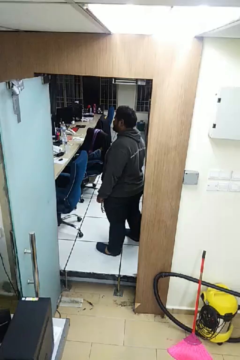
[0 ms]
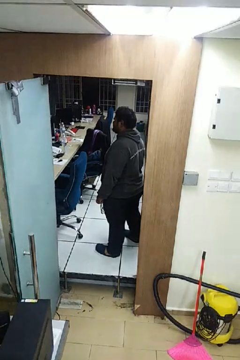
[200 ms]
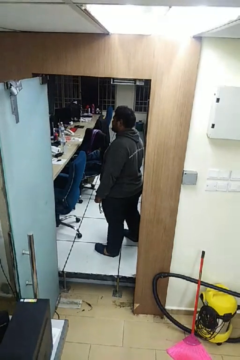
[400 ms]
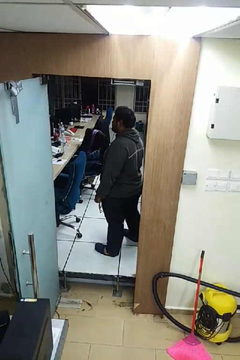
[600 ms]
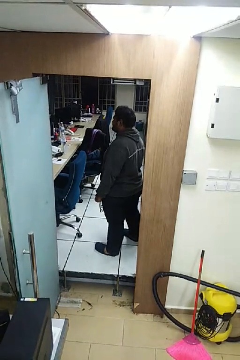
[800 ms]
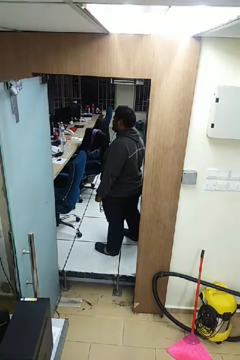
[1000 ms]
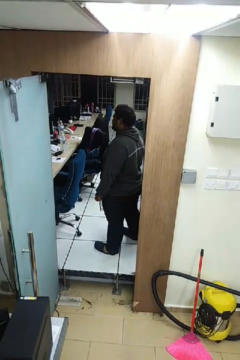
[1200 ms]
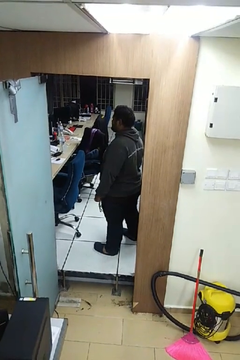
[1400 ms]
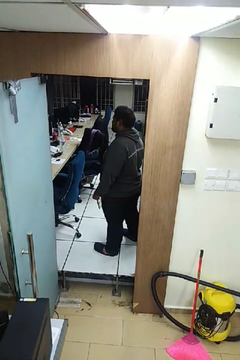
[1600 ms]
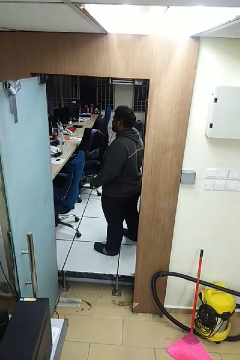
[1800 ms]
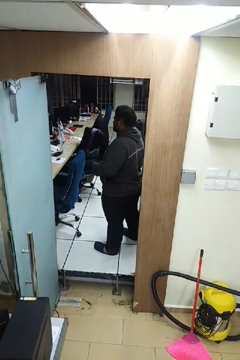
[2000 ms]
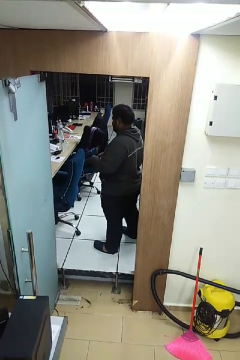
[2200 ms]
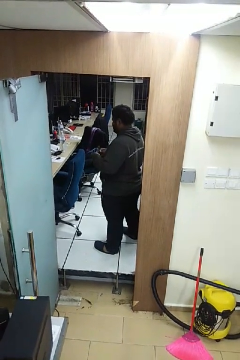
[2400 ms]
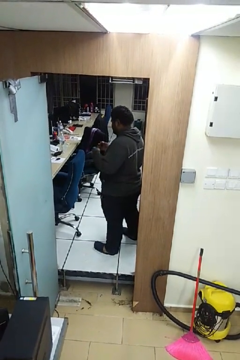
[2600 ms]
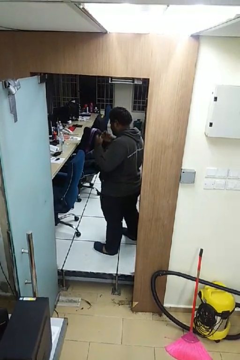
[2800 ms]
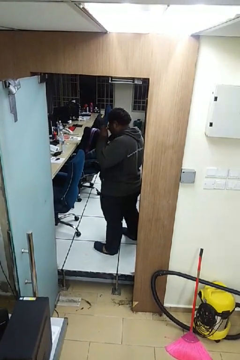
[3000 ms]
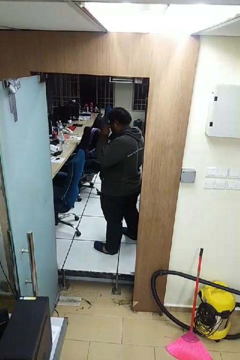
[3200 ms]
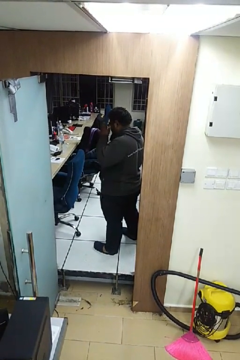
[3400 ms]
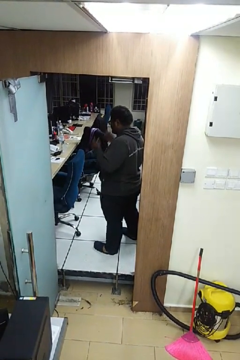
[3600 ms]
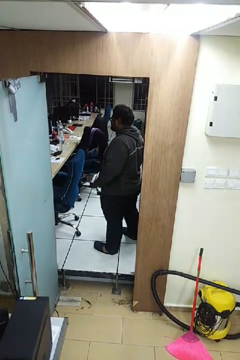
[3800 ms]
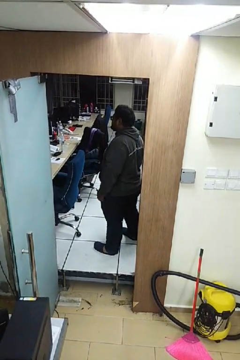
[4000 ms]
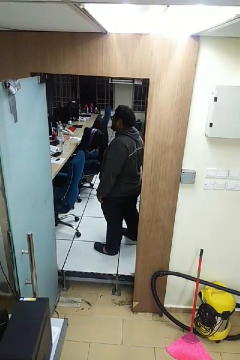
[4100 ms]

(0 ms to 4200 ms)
person puts on glasses

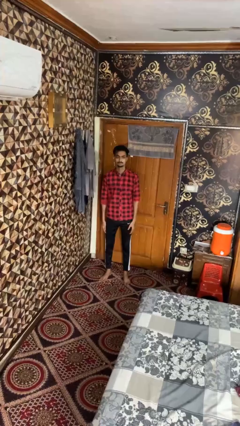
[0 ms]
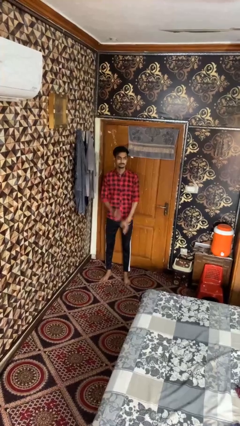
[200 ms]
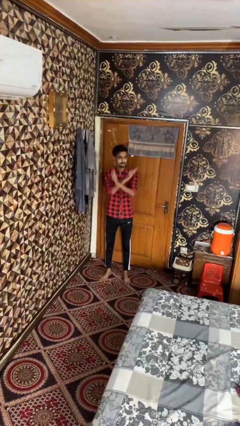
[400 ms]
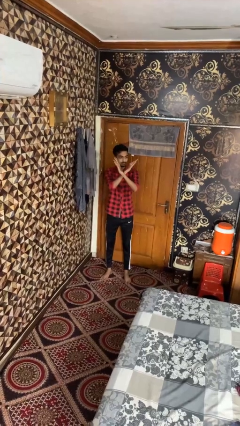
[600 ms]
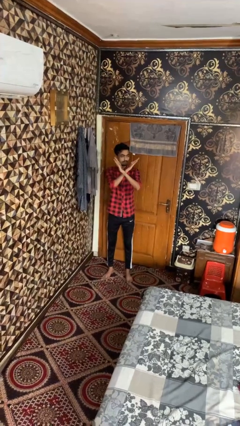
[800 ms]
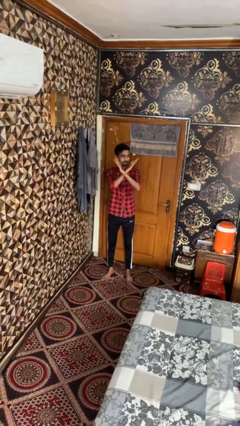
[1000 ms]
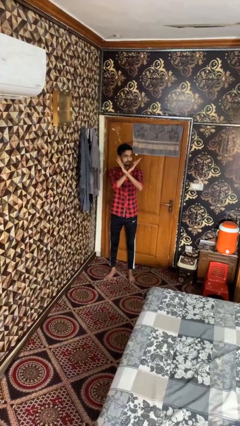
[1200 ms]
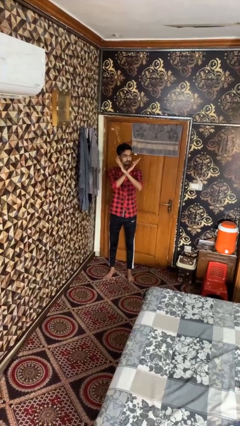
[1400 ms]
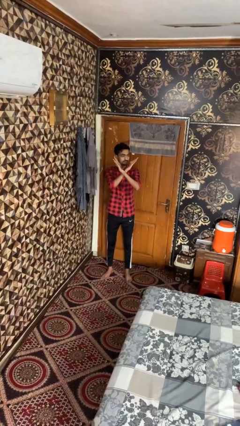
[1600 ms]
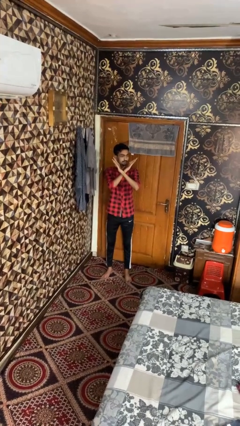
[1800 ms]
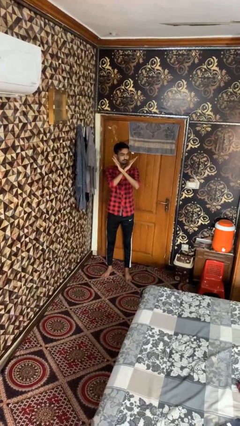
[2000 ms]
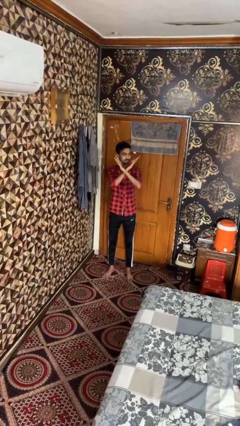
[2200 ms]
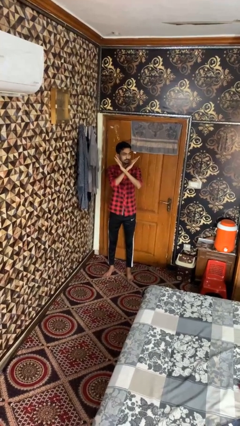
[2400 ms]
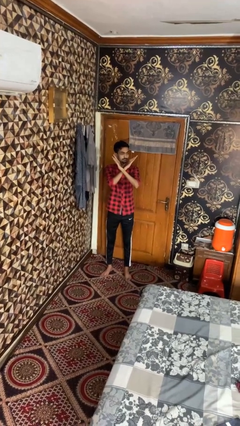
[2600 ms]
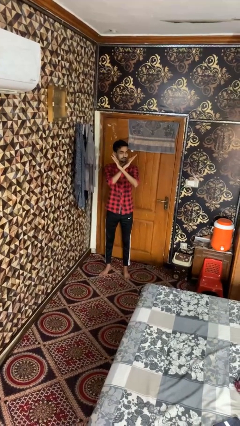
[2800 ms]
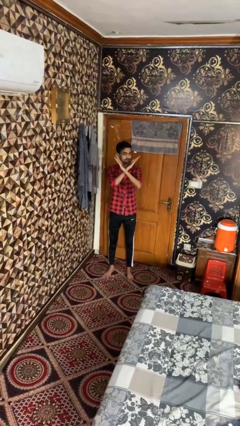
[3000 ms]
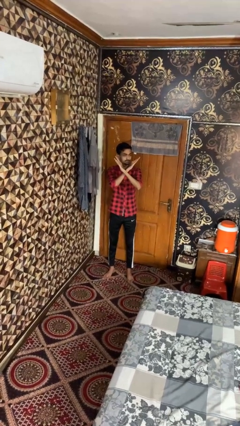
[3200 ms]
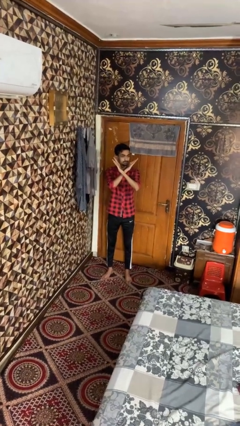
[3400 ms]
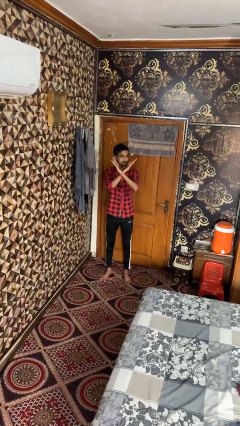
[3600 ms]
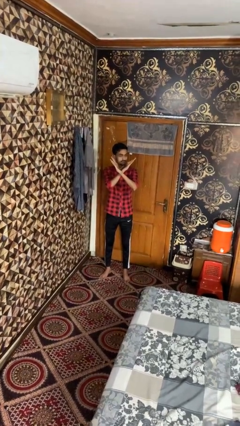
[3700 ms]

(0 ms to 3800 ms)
person gestures arms x

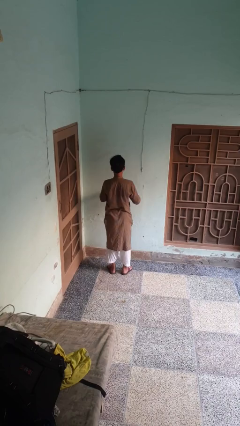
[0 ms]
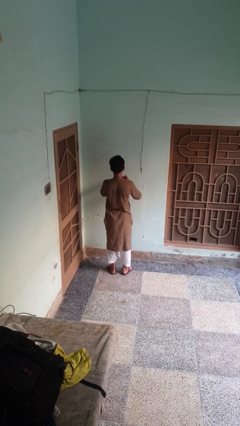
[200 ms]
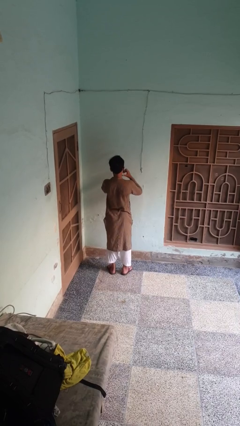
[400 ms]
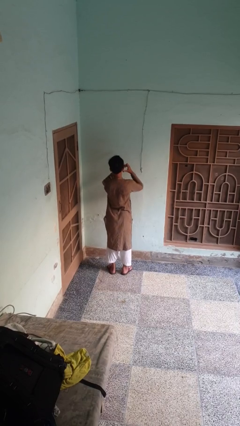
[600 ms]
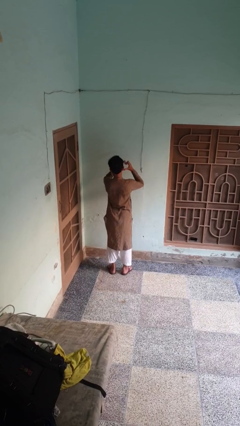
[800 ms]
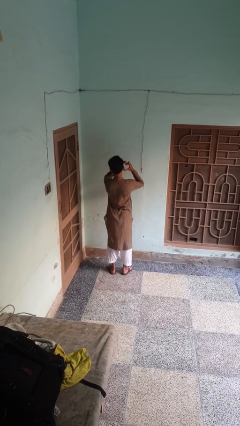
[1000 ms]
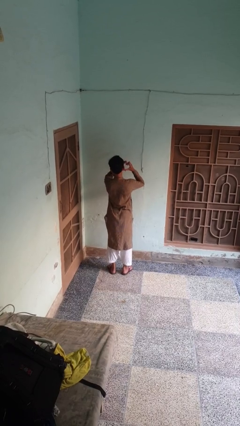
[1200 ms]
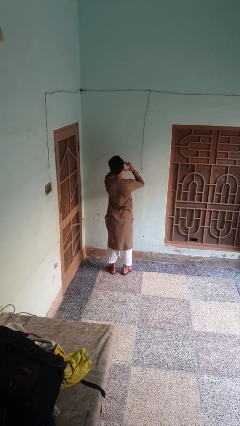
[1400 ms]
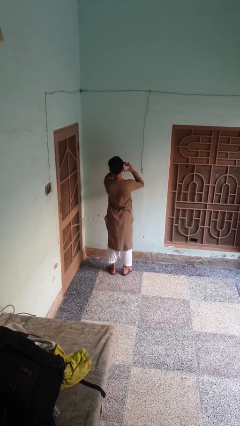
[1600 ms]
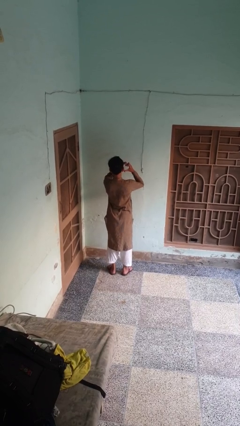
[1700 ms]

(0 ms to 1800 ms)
person gestures heart

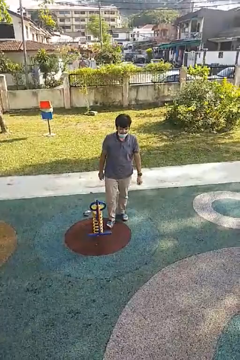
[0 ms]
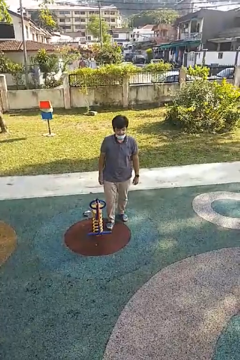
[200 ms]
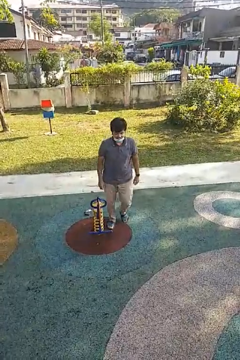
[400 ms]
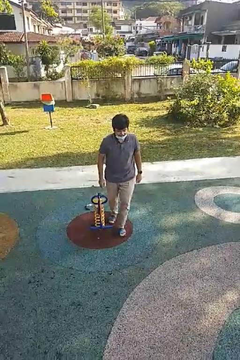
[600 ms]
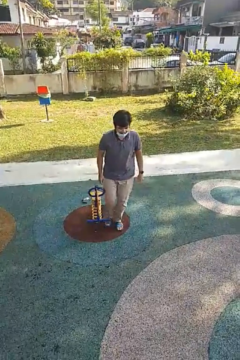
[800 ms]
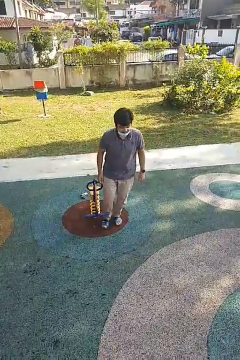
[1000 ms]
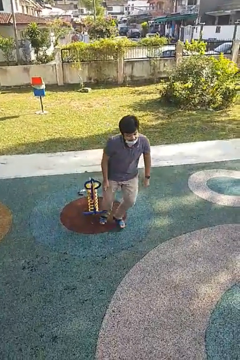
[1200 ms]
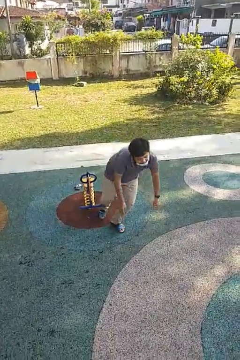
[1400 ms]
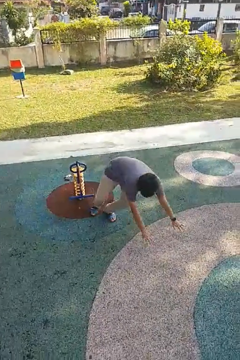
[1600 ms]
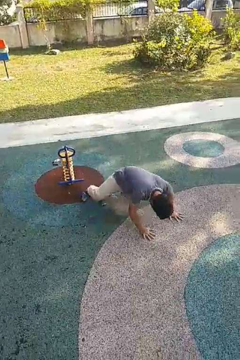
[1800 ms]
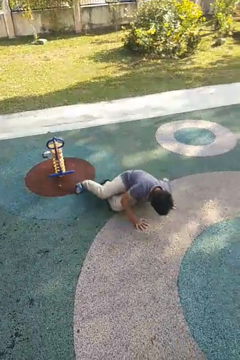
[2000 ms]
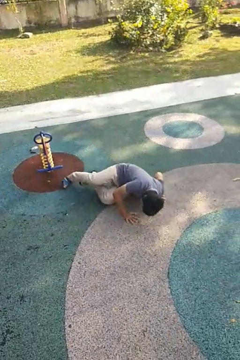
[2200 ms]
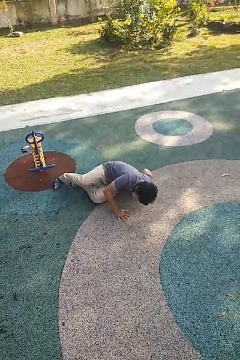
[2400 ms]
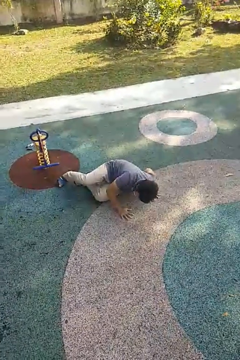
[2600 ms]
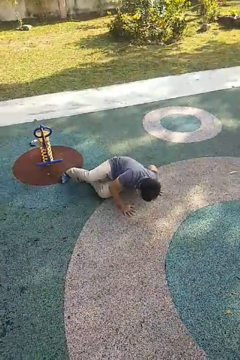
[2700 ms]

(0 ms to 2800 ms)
person trips on object on floor

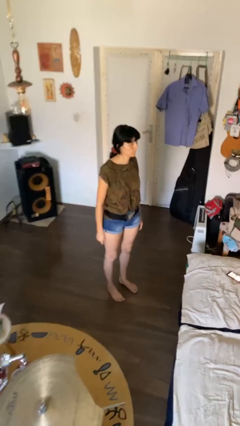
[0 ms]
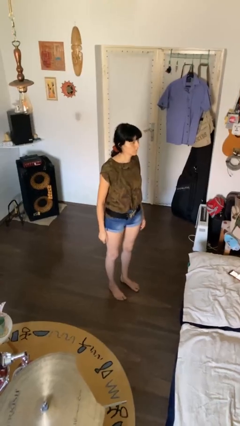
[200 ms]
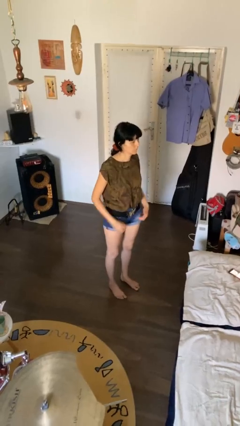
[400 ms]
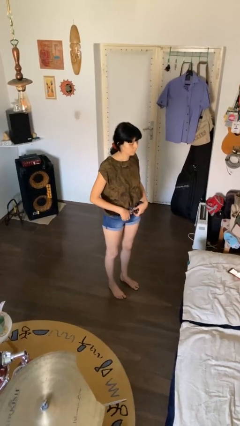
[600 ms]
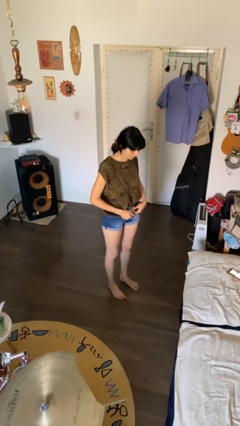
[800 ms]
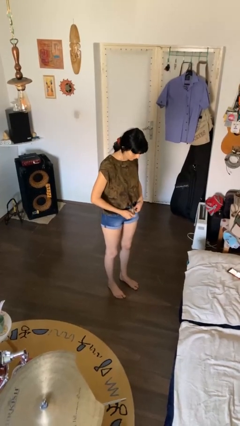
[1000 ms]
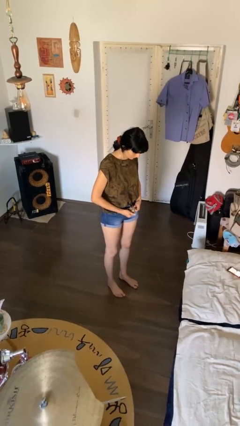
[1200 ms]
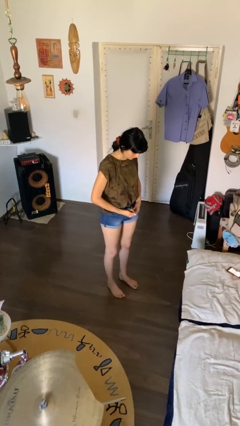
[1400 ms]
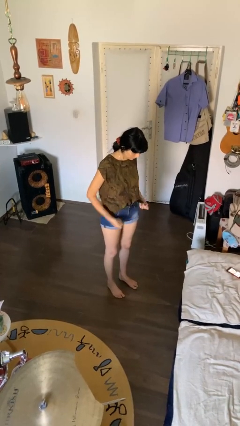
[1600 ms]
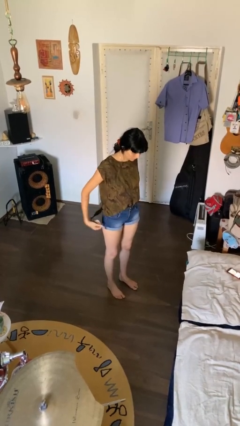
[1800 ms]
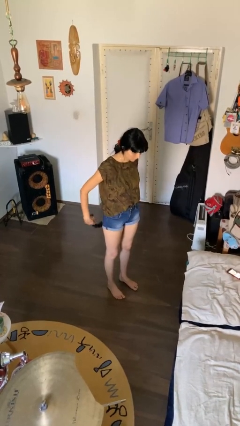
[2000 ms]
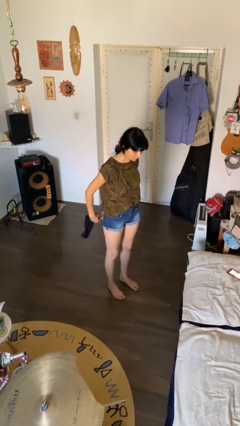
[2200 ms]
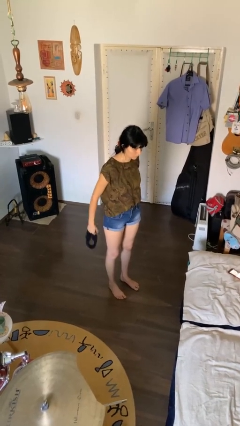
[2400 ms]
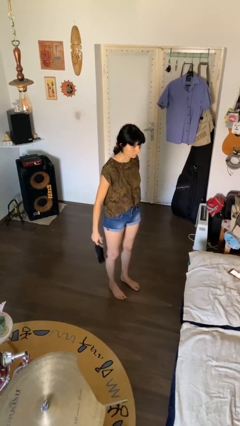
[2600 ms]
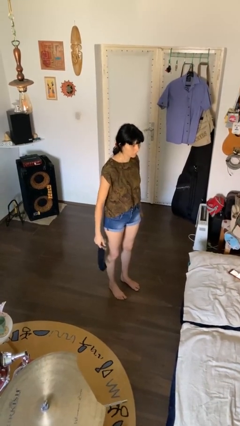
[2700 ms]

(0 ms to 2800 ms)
person takes off belt

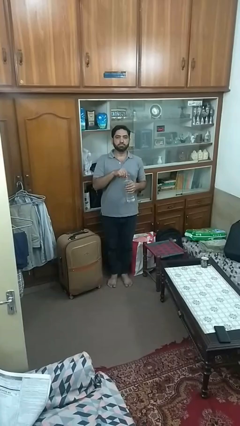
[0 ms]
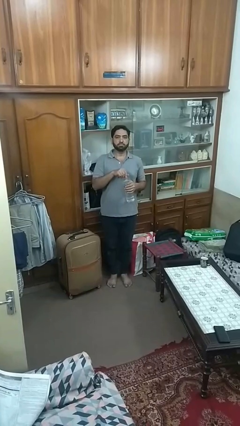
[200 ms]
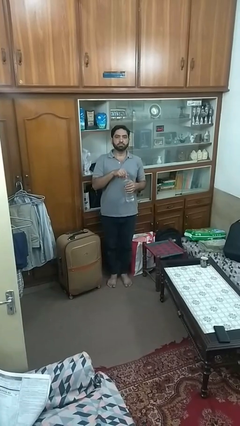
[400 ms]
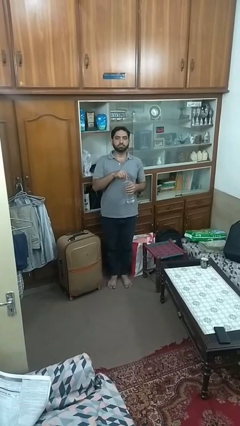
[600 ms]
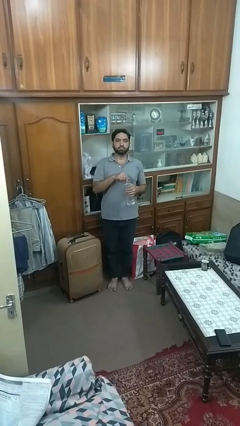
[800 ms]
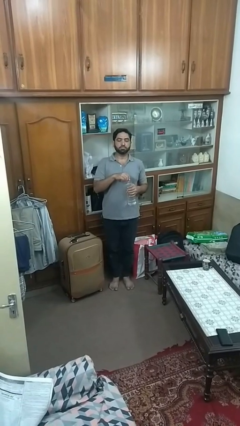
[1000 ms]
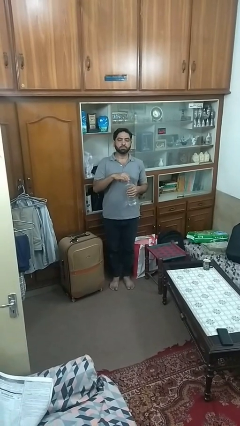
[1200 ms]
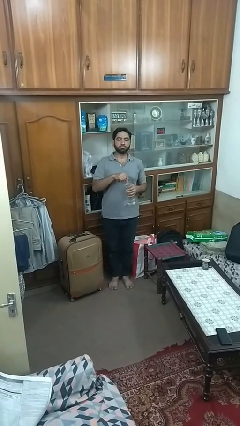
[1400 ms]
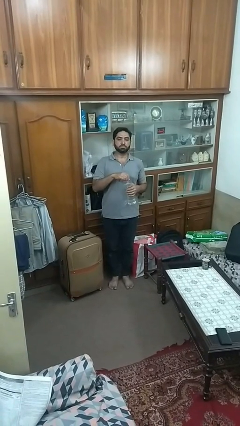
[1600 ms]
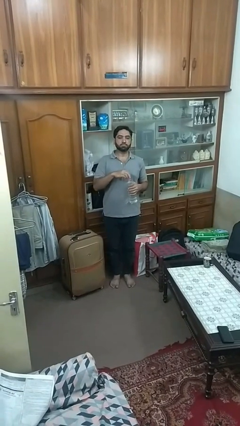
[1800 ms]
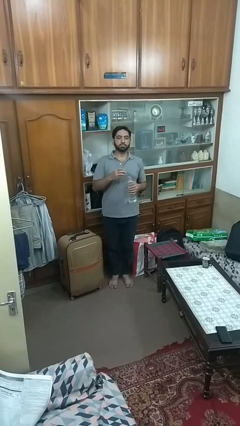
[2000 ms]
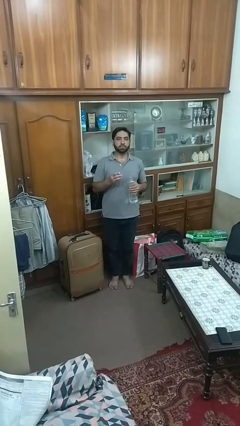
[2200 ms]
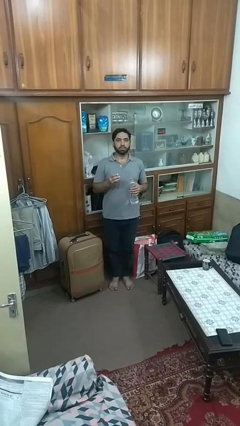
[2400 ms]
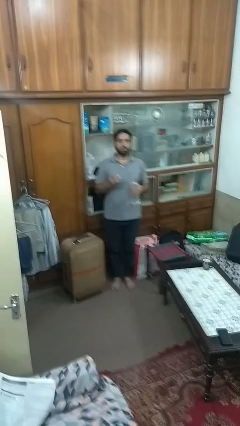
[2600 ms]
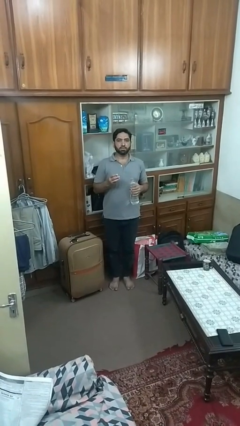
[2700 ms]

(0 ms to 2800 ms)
person unscrews lid from bottle

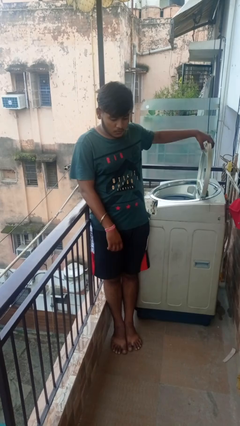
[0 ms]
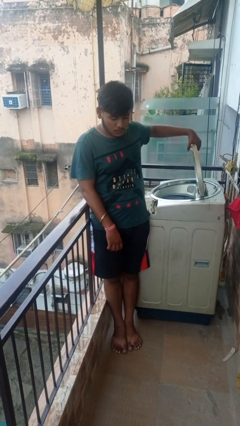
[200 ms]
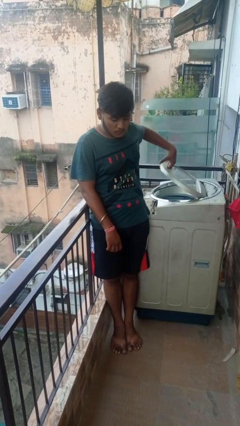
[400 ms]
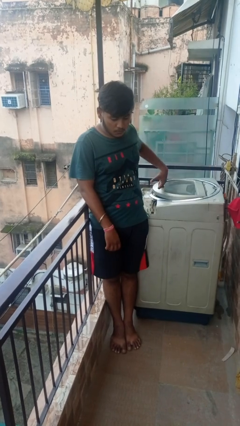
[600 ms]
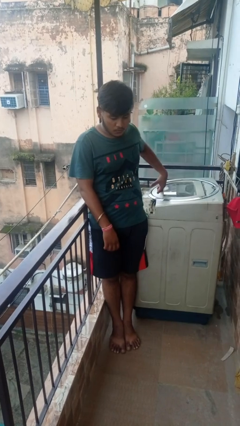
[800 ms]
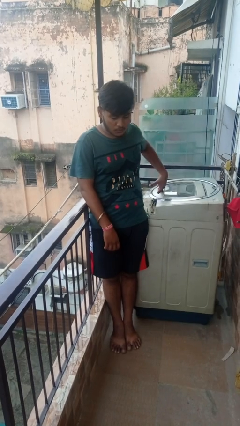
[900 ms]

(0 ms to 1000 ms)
person closes clothes washer
